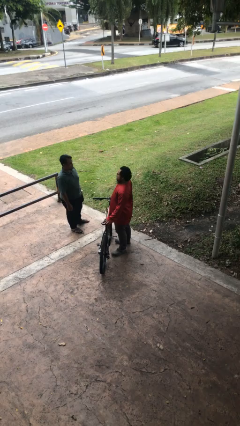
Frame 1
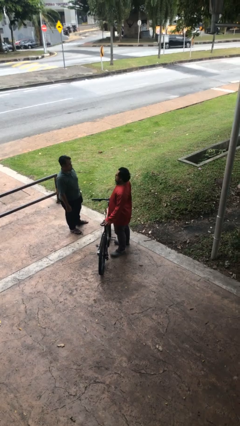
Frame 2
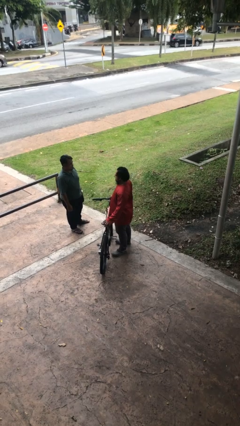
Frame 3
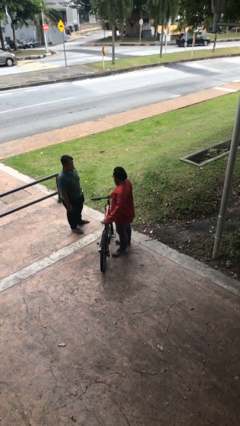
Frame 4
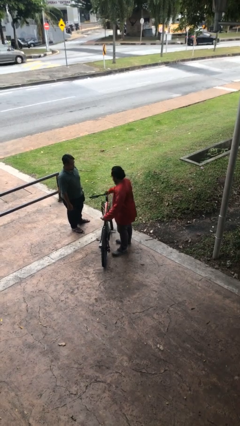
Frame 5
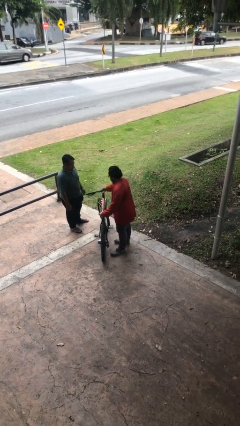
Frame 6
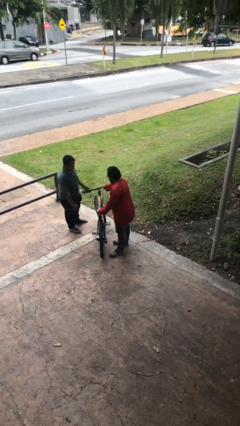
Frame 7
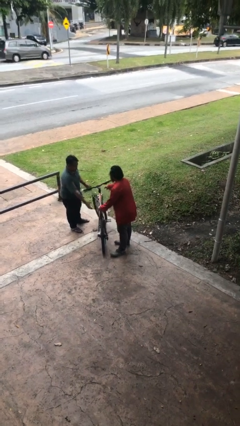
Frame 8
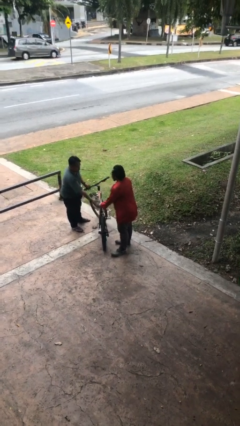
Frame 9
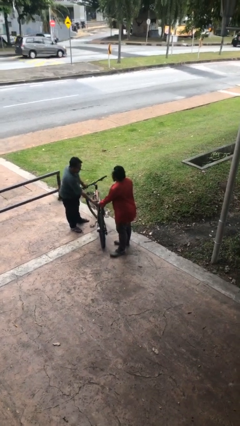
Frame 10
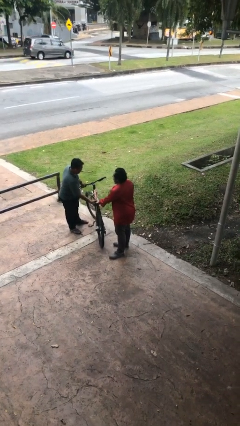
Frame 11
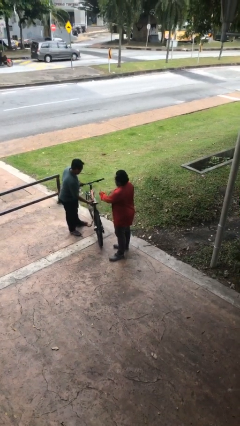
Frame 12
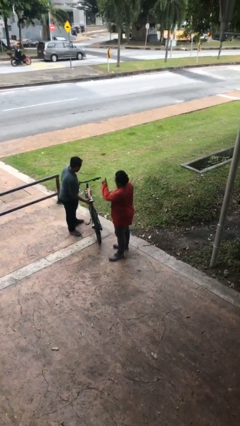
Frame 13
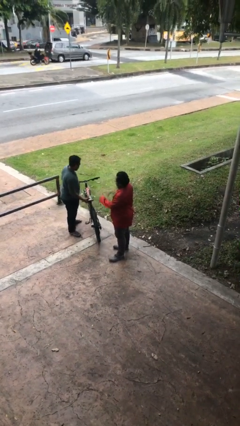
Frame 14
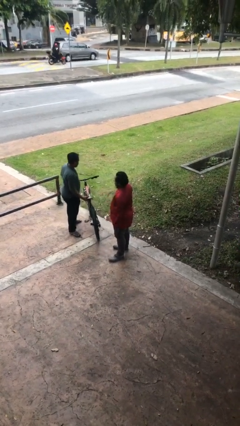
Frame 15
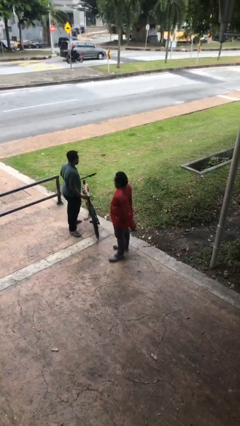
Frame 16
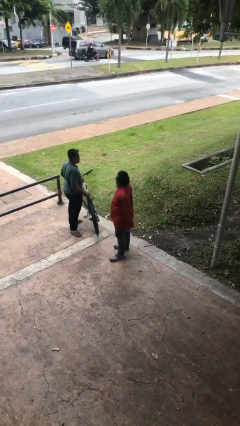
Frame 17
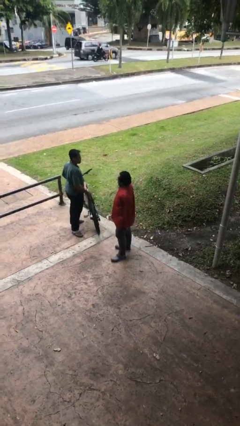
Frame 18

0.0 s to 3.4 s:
person transfers object to person

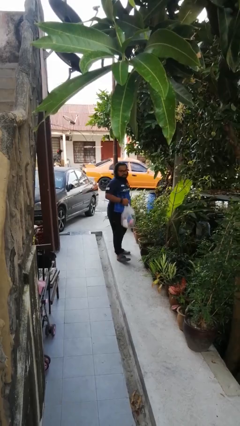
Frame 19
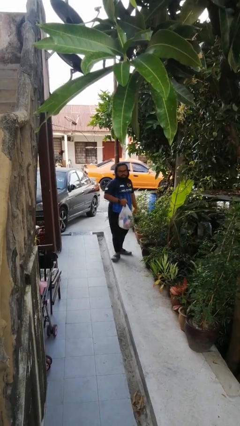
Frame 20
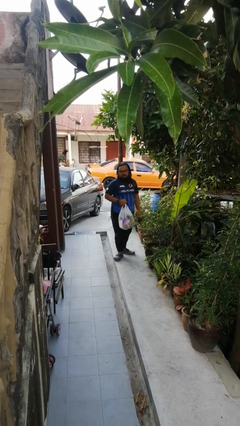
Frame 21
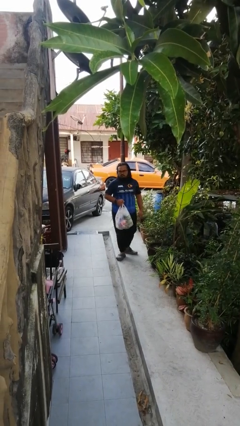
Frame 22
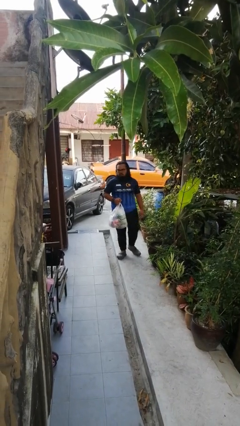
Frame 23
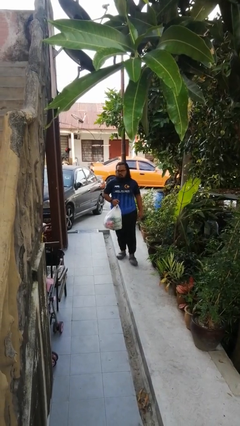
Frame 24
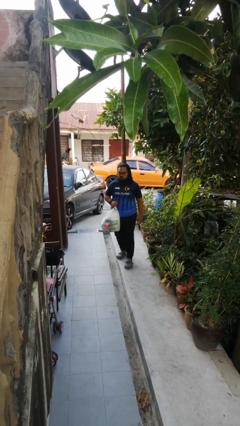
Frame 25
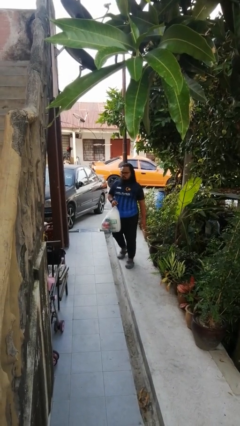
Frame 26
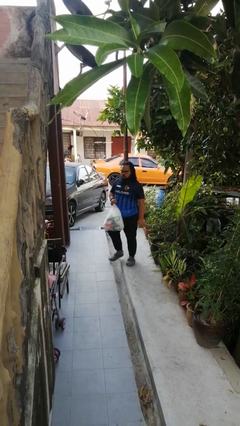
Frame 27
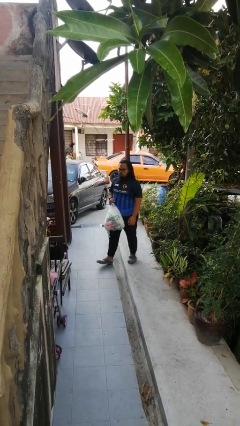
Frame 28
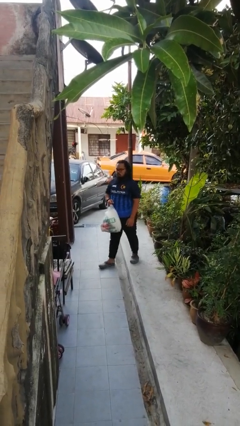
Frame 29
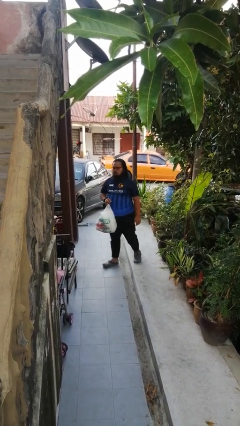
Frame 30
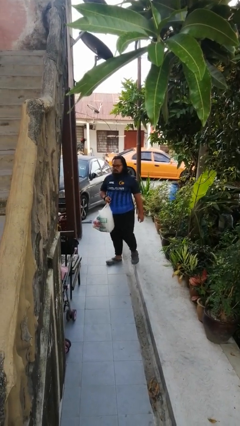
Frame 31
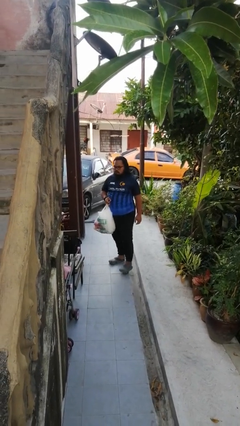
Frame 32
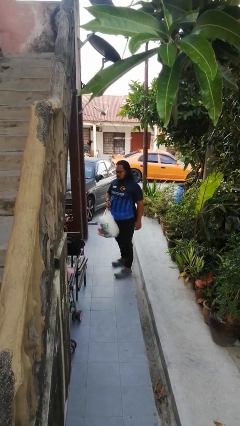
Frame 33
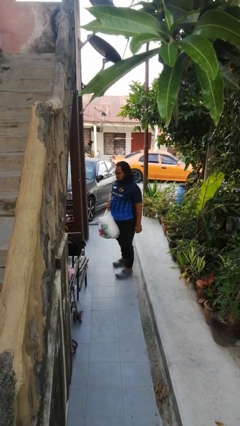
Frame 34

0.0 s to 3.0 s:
person carries groceries

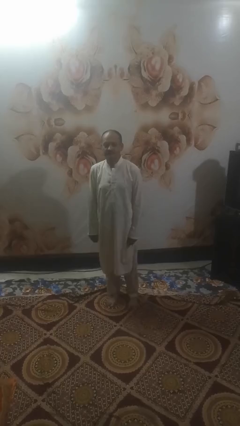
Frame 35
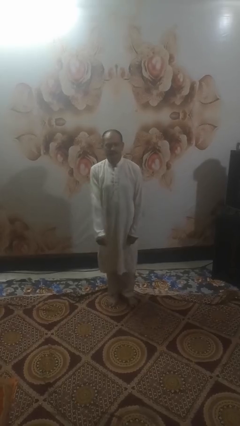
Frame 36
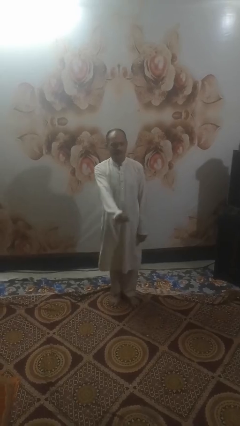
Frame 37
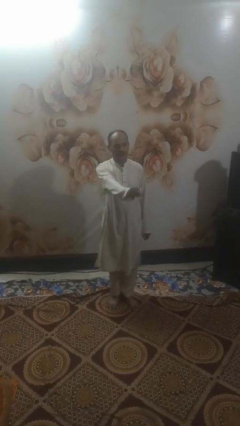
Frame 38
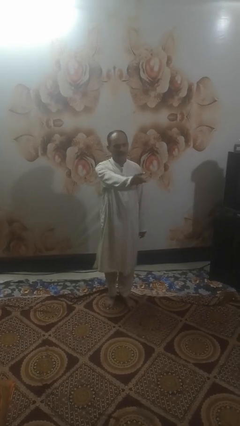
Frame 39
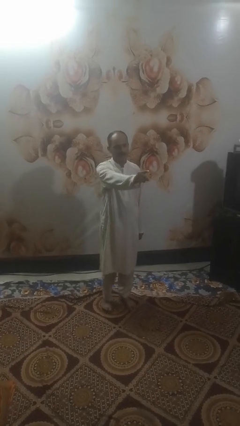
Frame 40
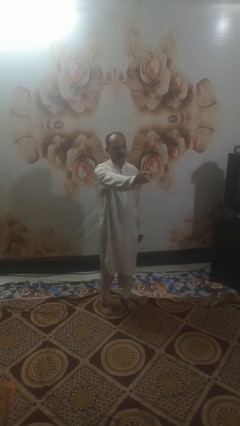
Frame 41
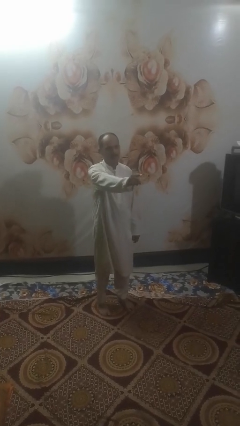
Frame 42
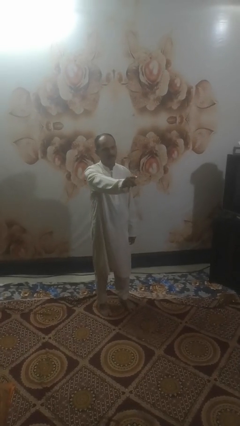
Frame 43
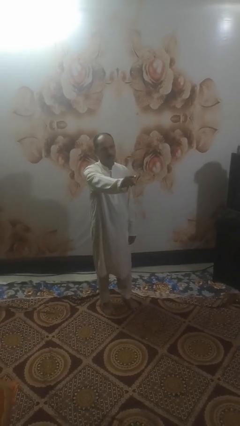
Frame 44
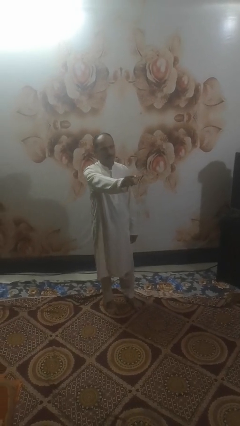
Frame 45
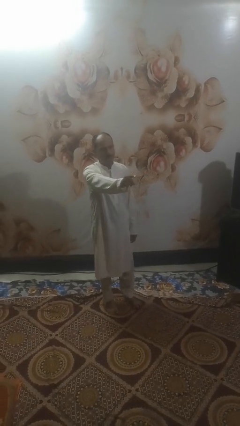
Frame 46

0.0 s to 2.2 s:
person points at person

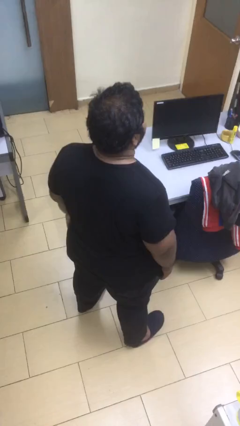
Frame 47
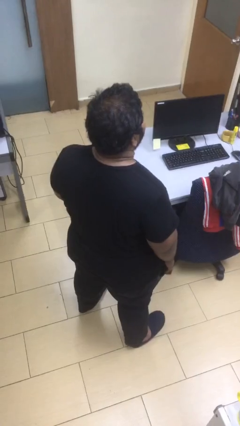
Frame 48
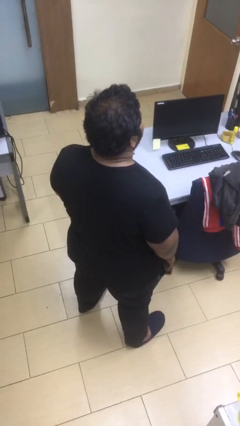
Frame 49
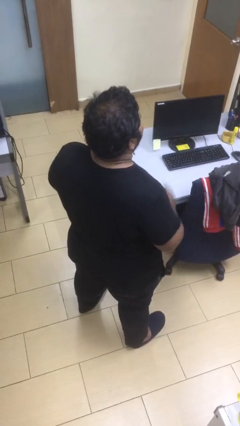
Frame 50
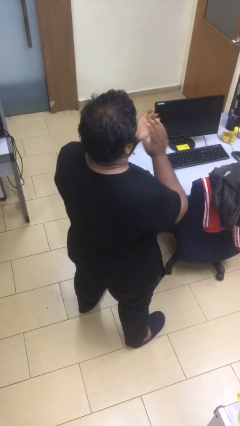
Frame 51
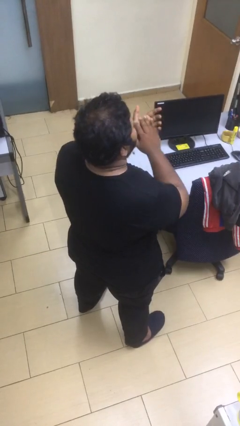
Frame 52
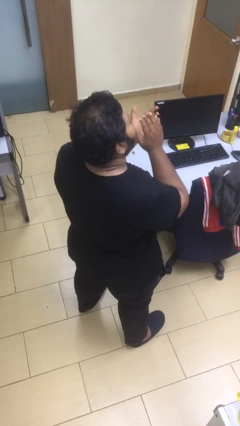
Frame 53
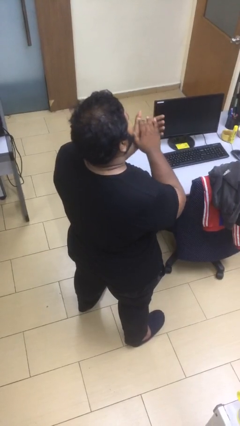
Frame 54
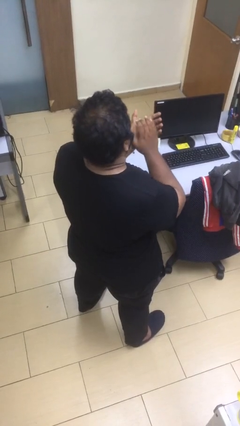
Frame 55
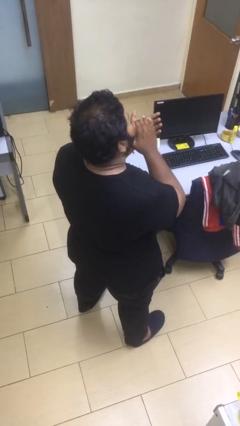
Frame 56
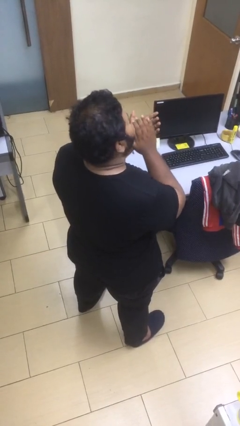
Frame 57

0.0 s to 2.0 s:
person claps hands

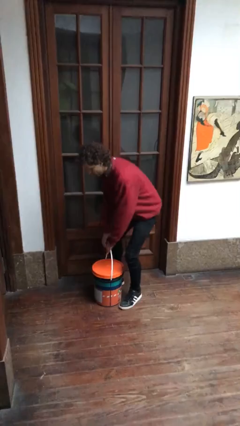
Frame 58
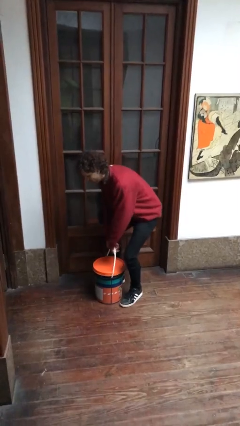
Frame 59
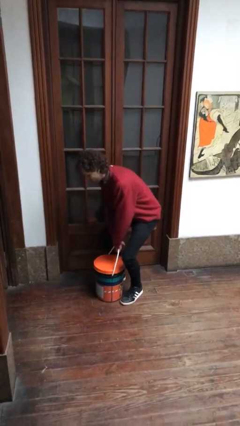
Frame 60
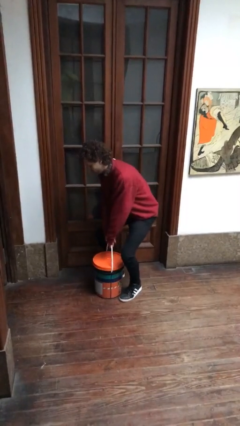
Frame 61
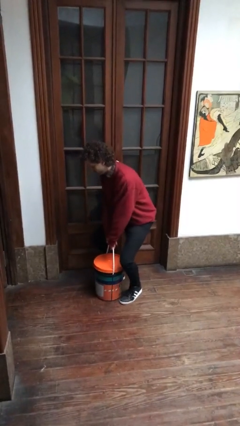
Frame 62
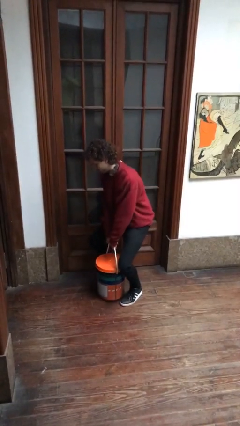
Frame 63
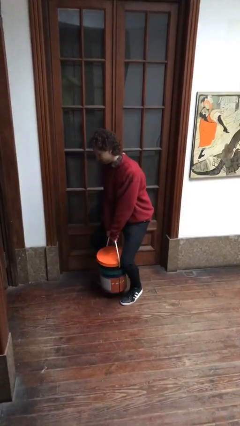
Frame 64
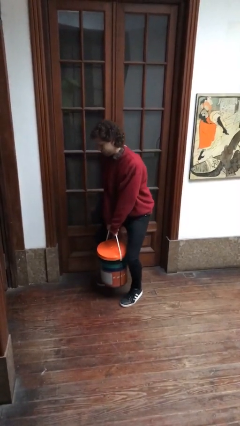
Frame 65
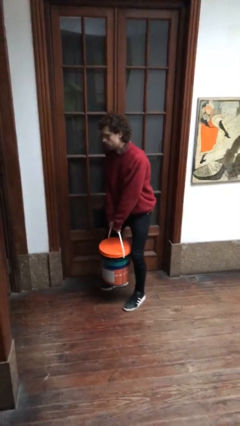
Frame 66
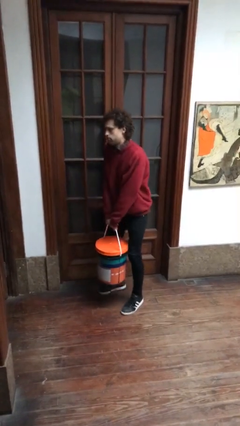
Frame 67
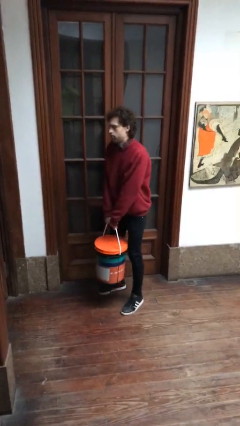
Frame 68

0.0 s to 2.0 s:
person picks up object from floor

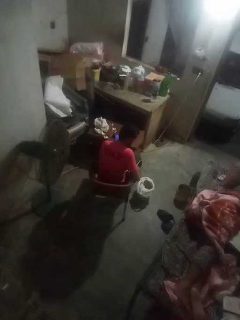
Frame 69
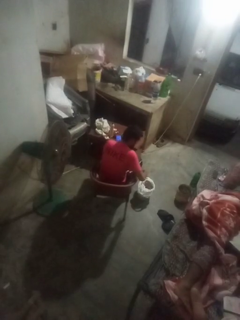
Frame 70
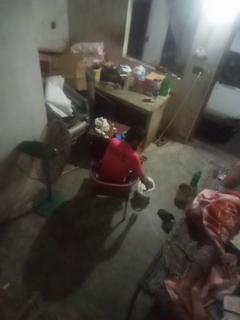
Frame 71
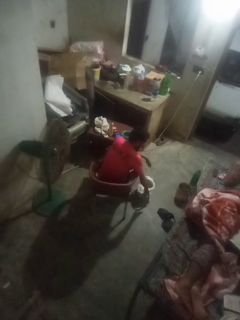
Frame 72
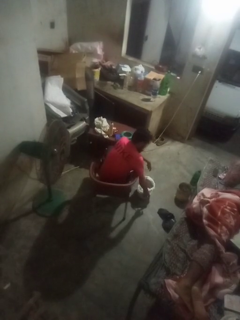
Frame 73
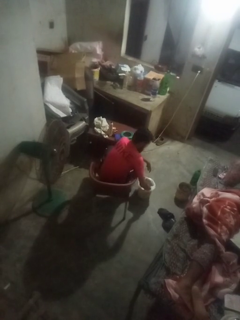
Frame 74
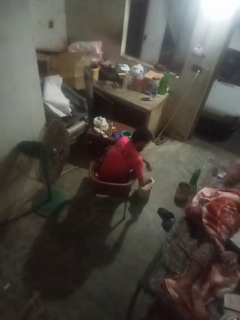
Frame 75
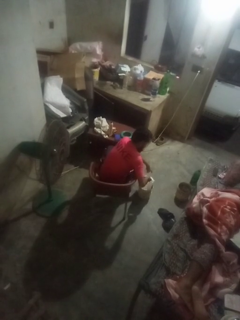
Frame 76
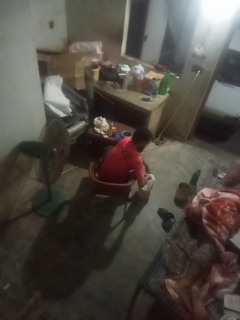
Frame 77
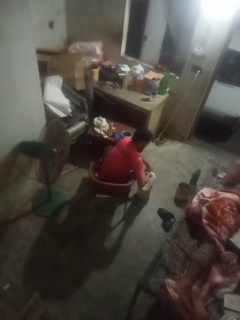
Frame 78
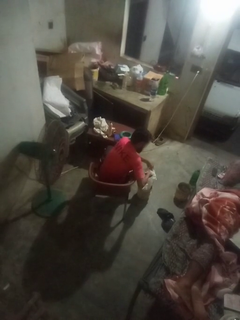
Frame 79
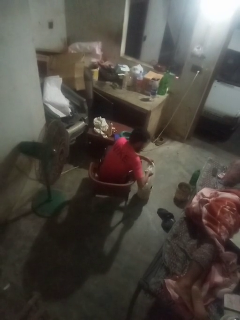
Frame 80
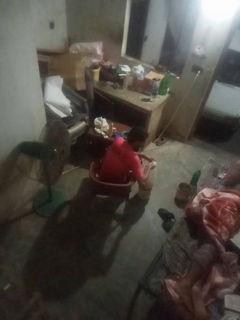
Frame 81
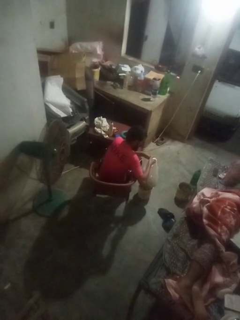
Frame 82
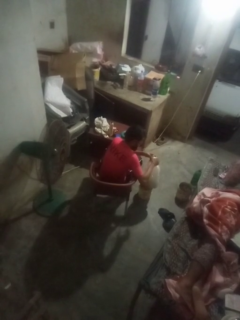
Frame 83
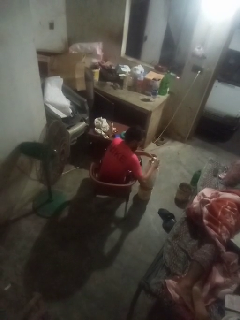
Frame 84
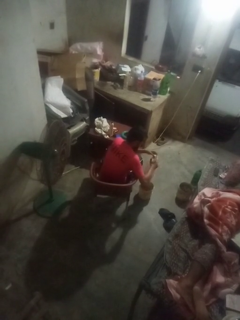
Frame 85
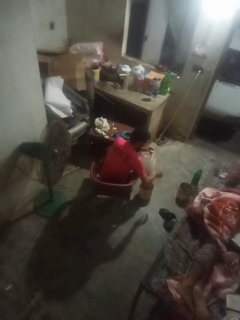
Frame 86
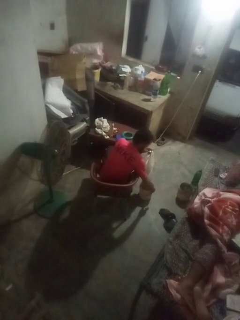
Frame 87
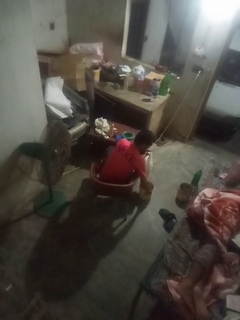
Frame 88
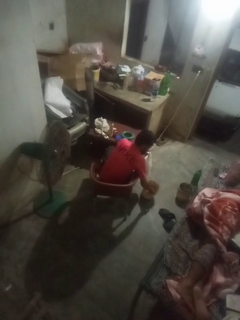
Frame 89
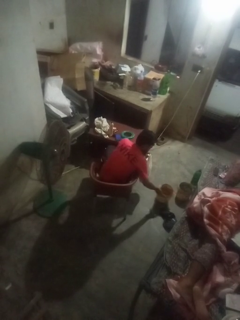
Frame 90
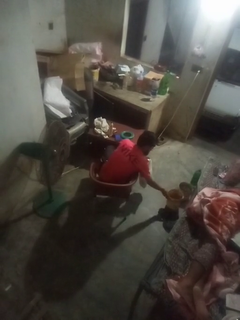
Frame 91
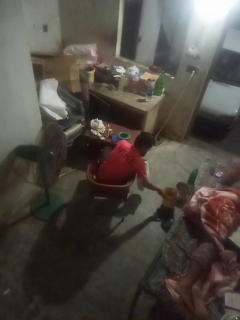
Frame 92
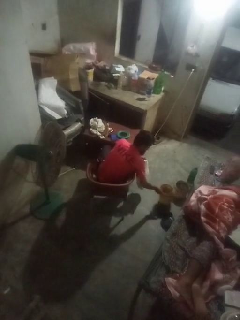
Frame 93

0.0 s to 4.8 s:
person removes trashbag from trashcan

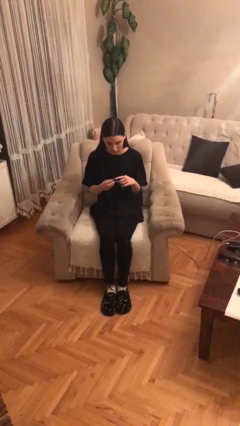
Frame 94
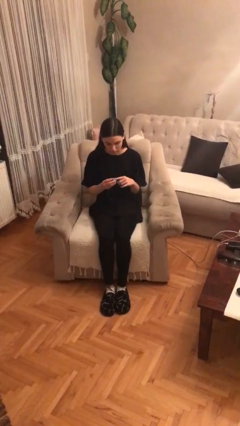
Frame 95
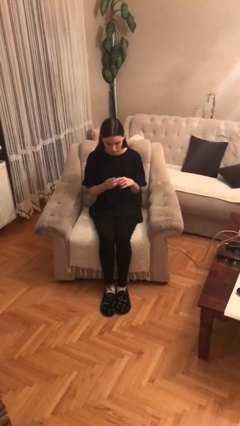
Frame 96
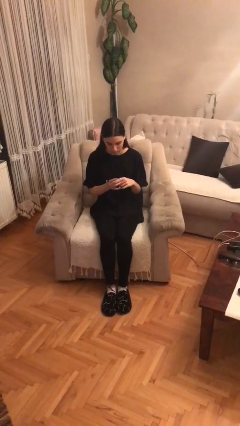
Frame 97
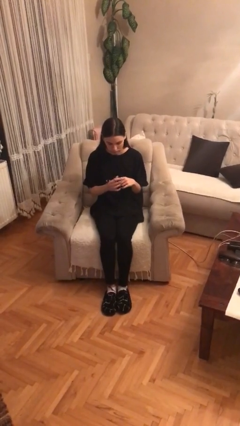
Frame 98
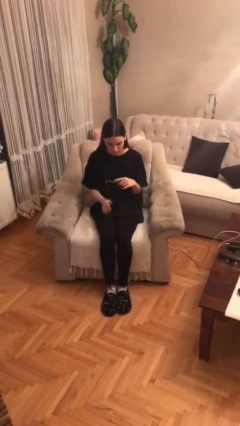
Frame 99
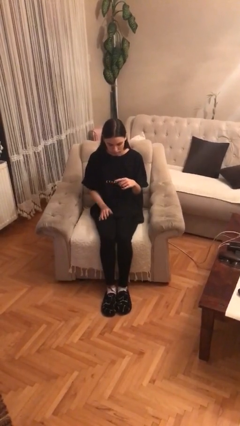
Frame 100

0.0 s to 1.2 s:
person puts on ring
